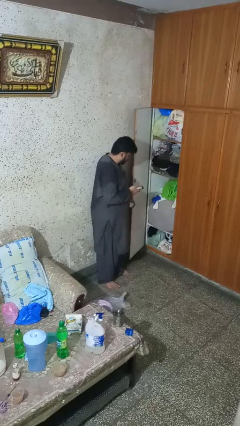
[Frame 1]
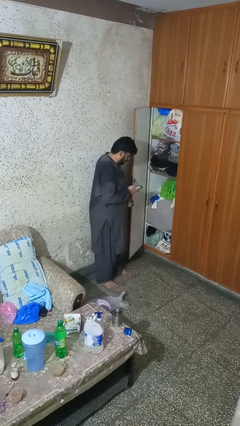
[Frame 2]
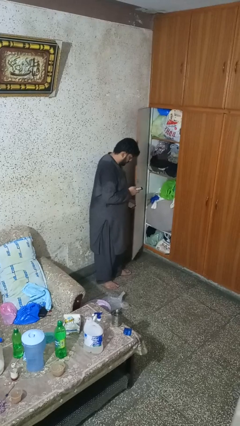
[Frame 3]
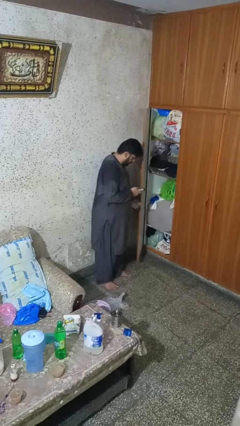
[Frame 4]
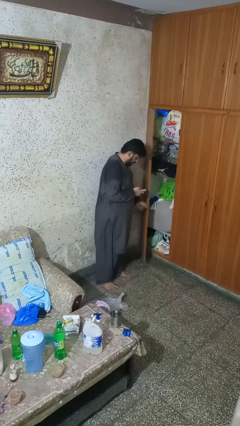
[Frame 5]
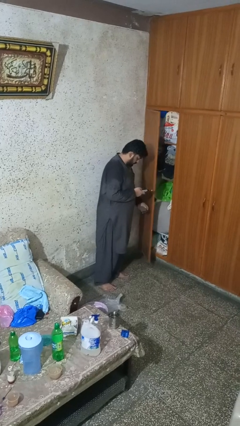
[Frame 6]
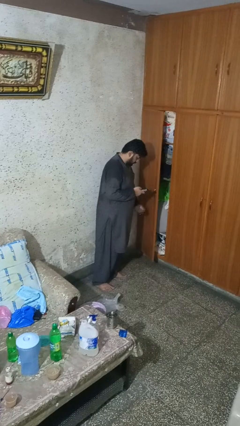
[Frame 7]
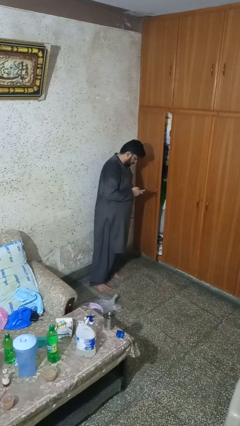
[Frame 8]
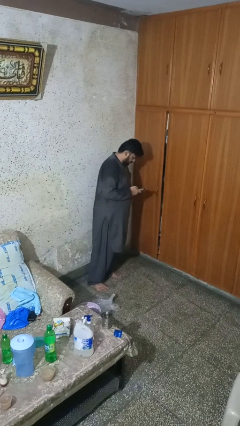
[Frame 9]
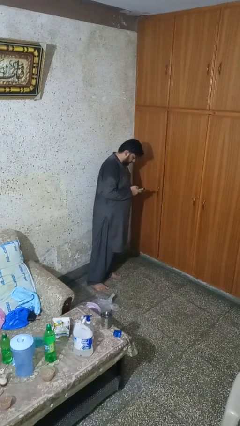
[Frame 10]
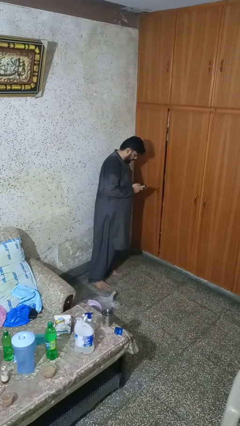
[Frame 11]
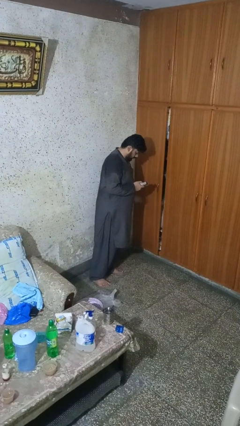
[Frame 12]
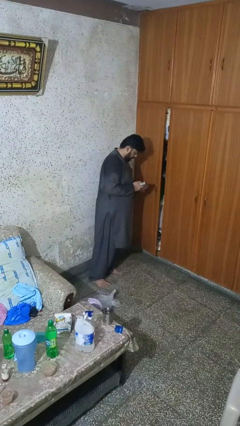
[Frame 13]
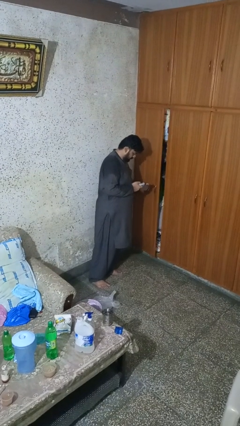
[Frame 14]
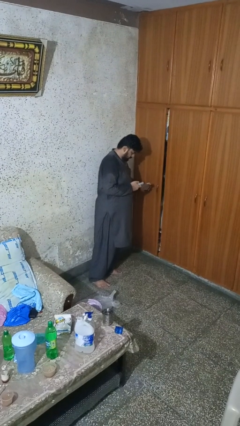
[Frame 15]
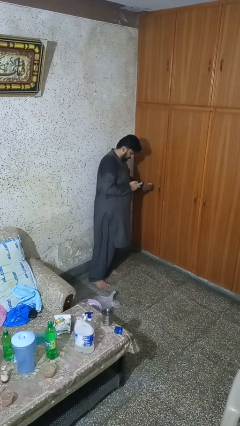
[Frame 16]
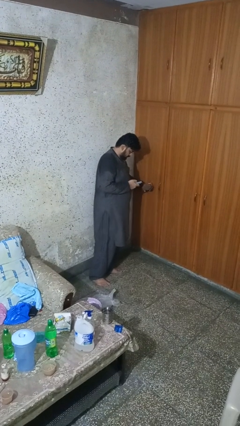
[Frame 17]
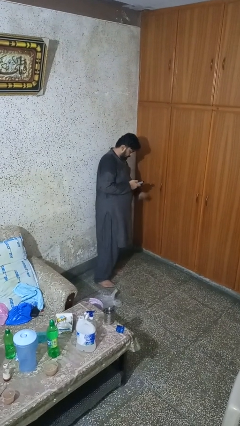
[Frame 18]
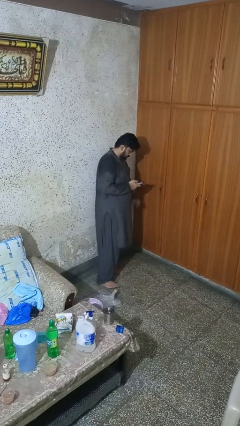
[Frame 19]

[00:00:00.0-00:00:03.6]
person closes closet door

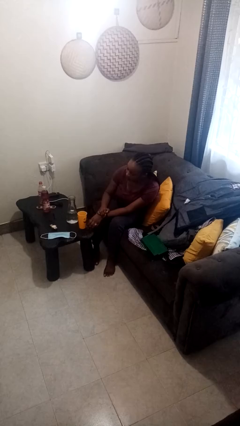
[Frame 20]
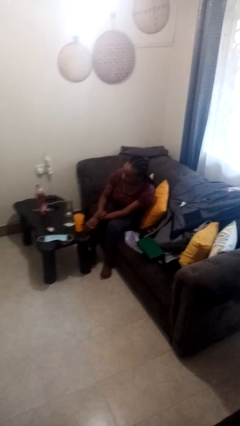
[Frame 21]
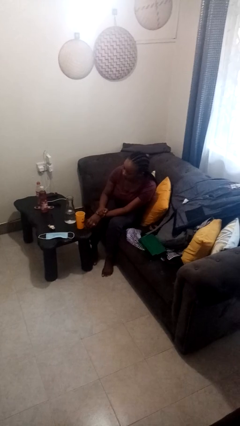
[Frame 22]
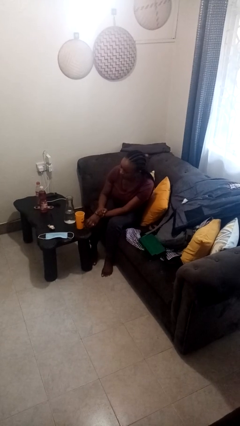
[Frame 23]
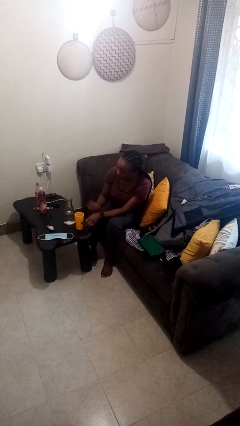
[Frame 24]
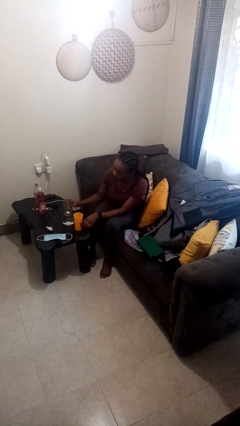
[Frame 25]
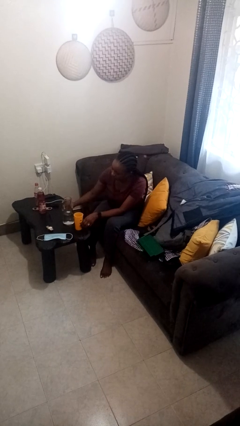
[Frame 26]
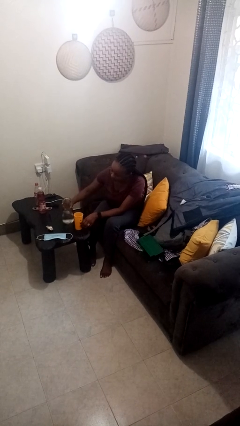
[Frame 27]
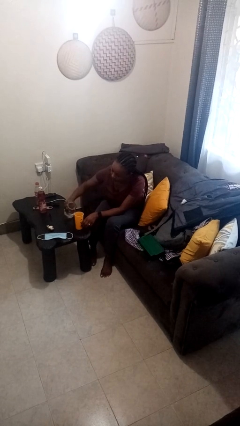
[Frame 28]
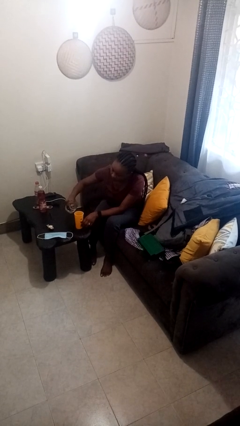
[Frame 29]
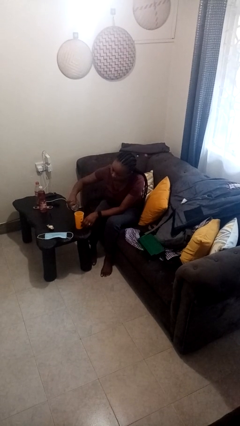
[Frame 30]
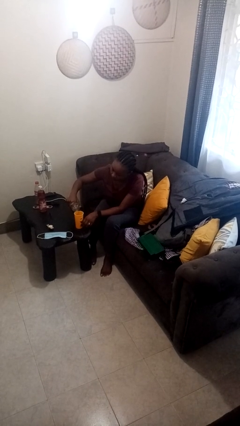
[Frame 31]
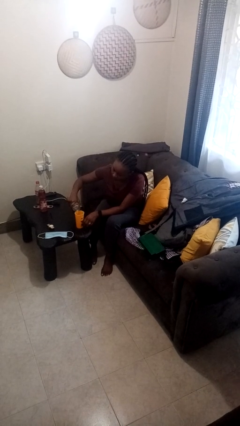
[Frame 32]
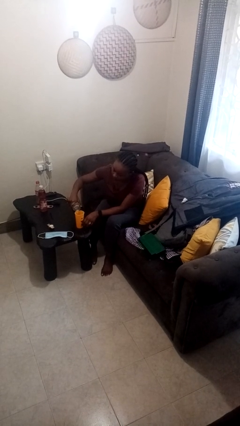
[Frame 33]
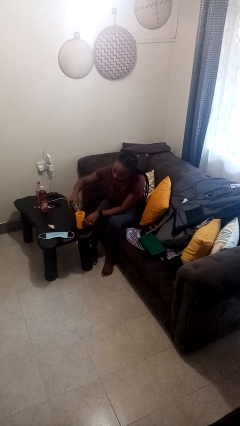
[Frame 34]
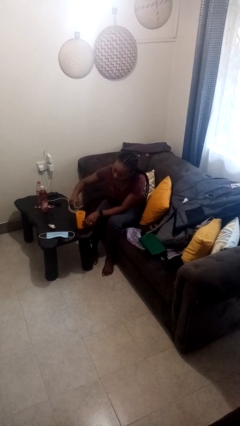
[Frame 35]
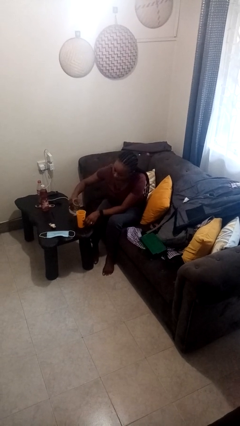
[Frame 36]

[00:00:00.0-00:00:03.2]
person pours liquid into cup

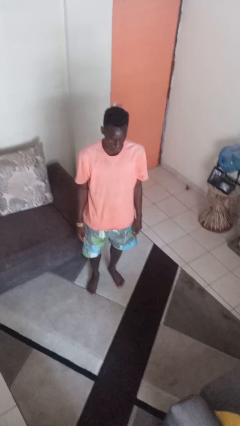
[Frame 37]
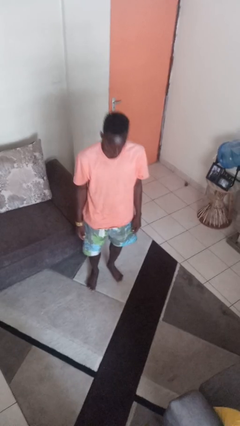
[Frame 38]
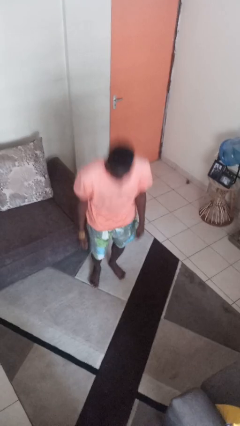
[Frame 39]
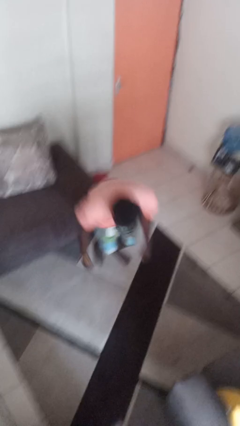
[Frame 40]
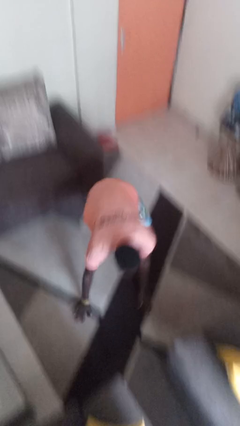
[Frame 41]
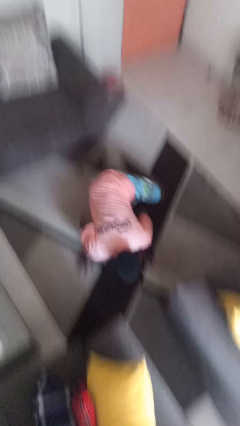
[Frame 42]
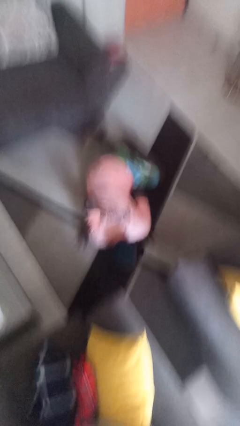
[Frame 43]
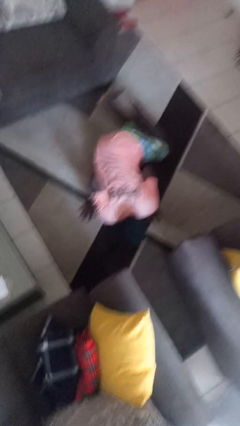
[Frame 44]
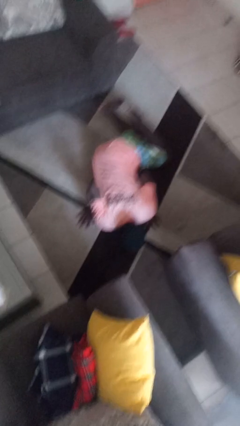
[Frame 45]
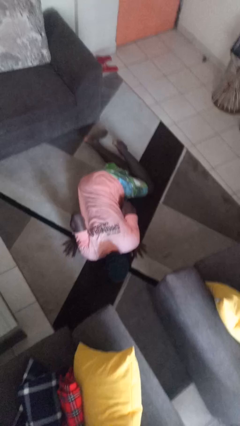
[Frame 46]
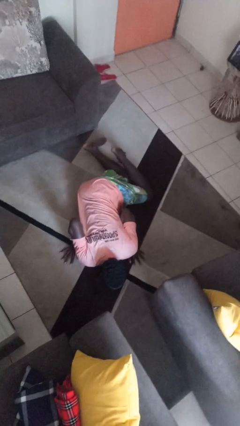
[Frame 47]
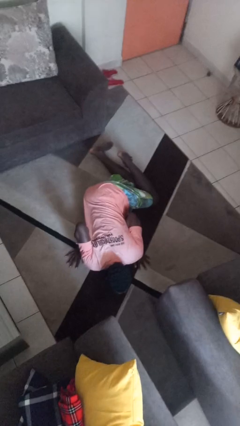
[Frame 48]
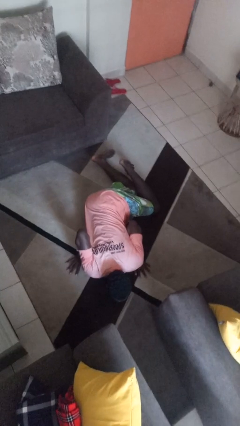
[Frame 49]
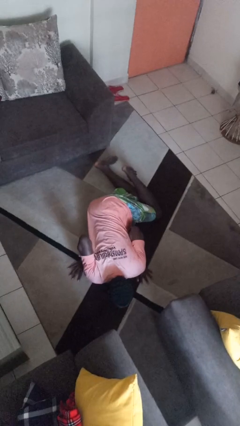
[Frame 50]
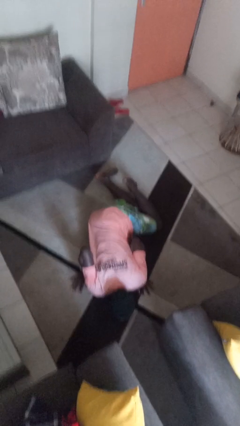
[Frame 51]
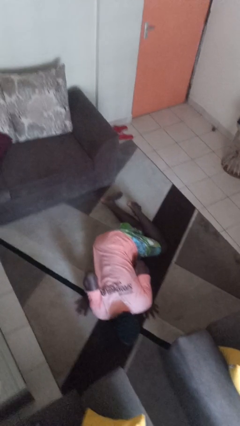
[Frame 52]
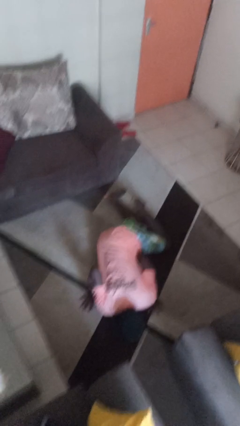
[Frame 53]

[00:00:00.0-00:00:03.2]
person falls while standing

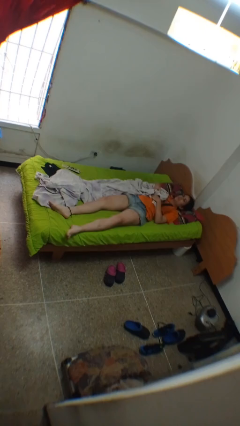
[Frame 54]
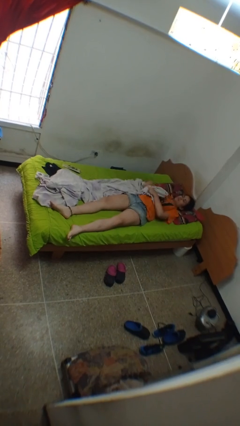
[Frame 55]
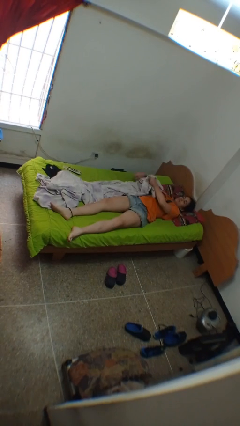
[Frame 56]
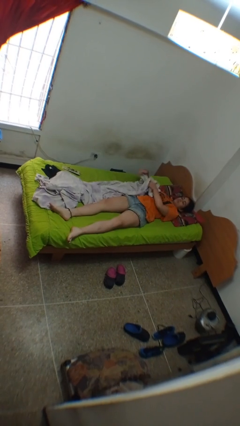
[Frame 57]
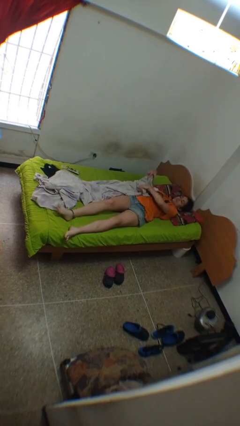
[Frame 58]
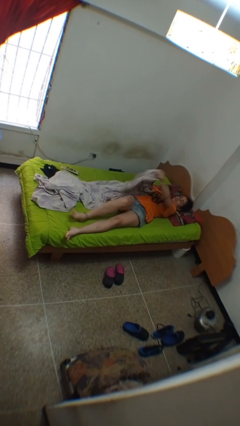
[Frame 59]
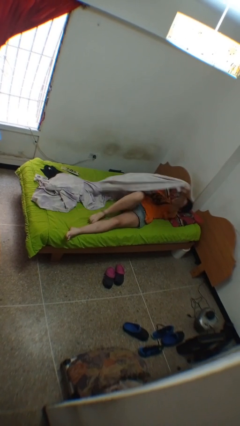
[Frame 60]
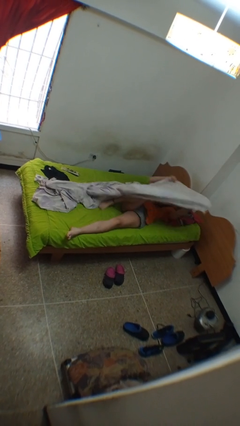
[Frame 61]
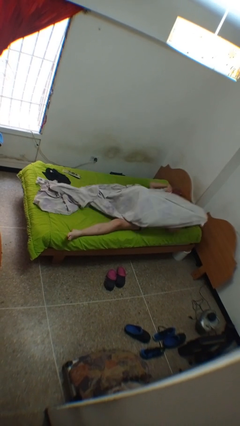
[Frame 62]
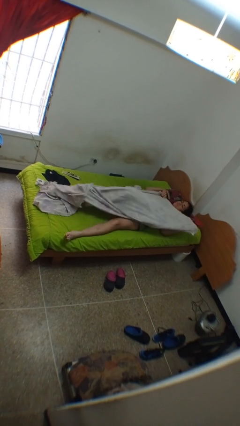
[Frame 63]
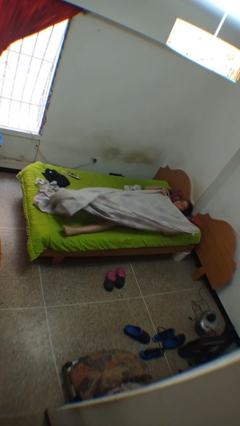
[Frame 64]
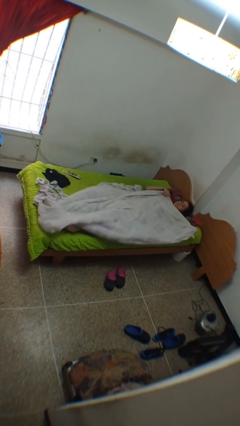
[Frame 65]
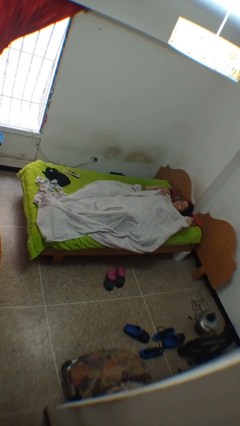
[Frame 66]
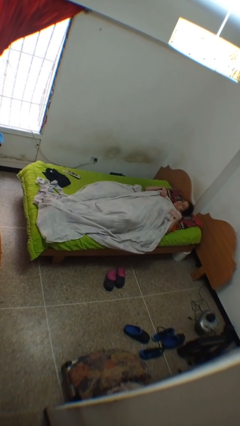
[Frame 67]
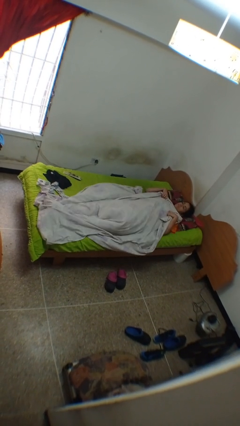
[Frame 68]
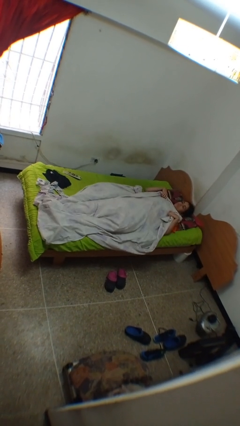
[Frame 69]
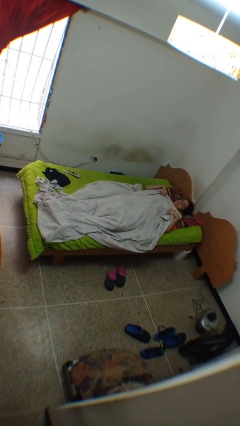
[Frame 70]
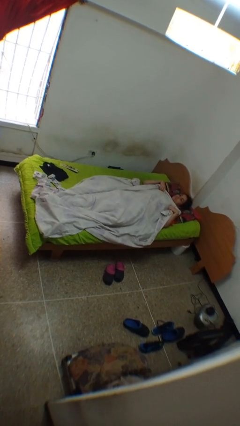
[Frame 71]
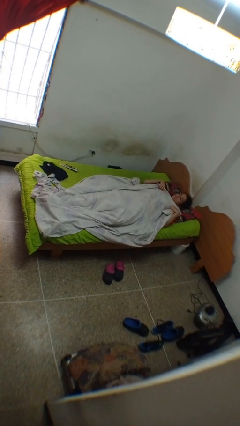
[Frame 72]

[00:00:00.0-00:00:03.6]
person covers with bedsheets

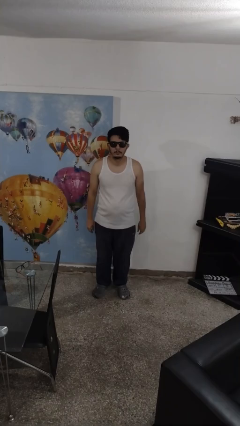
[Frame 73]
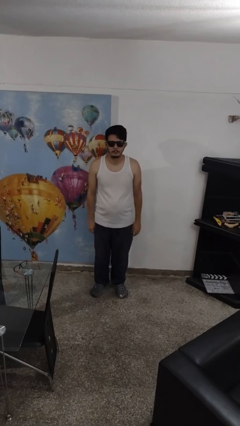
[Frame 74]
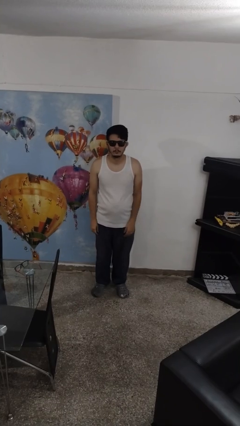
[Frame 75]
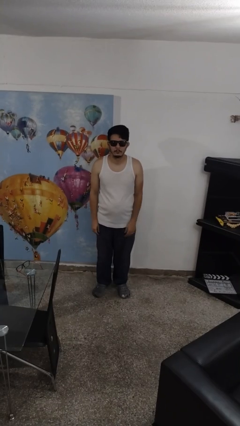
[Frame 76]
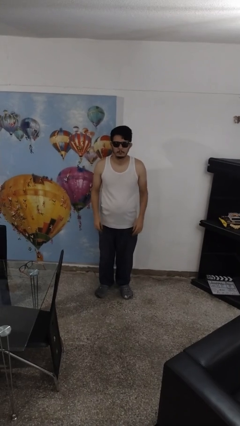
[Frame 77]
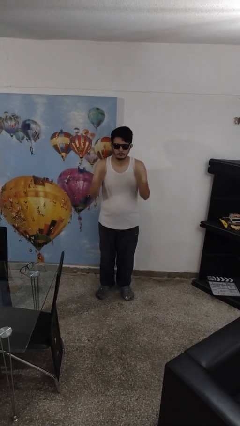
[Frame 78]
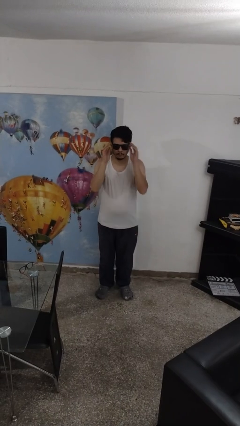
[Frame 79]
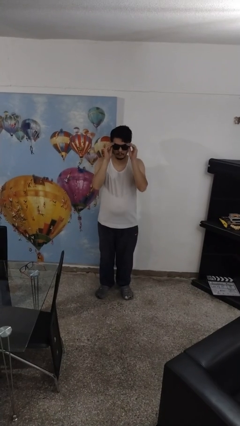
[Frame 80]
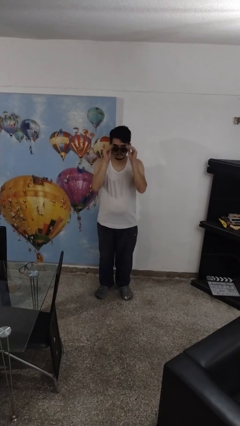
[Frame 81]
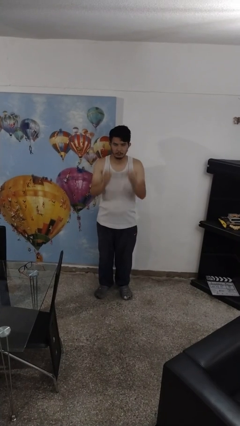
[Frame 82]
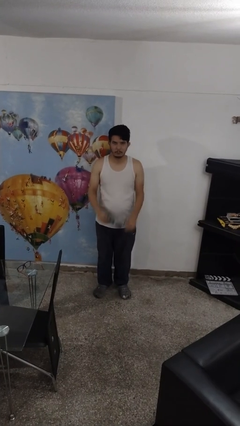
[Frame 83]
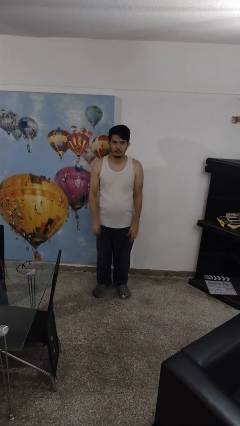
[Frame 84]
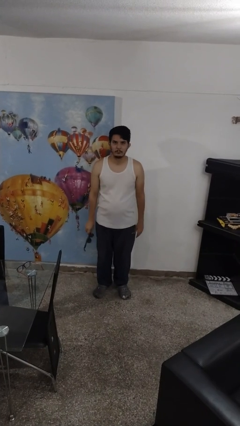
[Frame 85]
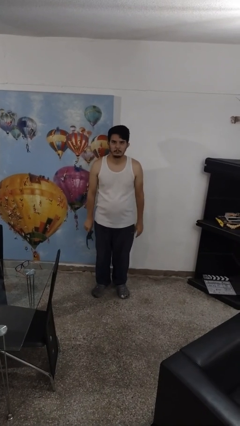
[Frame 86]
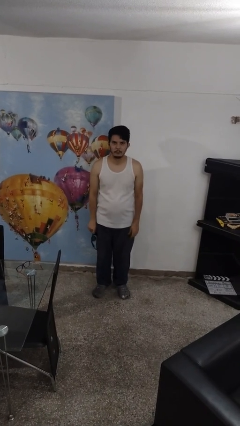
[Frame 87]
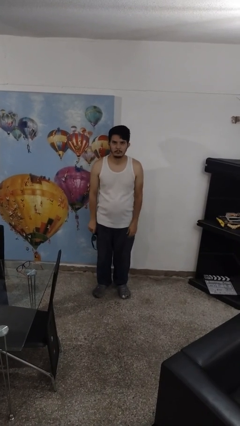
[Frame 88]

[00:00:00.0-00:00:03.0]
person takes off sunglasses

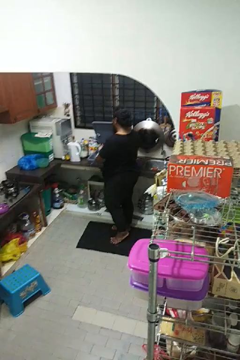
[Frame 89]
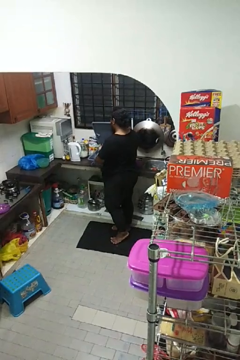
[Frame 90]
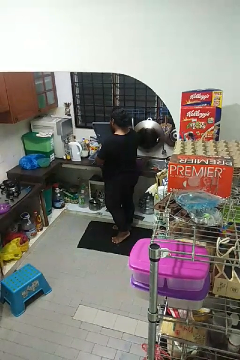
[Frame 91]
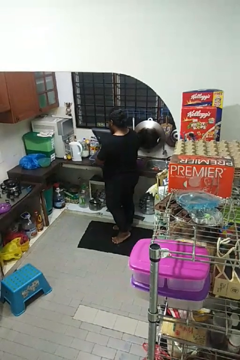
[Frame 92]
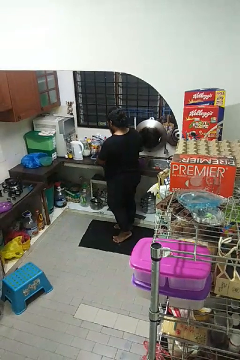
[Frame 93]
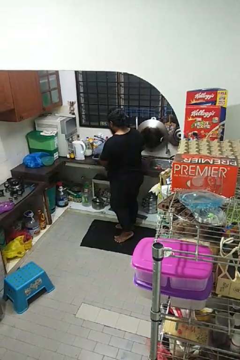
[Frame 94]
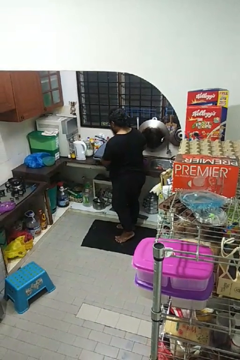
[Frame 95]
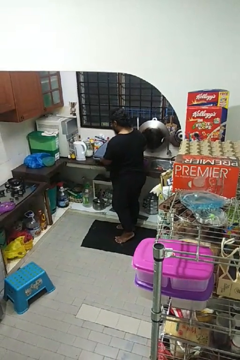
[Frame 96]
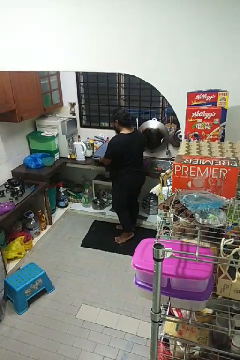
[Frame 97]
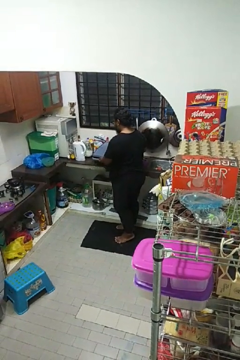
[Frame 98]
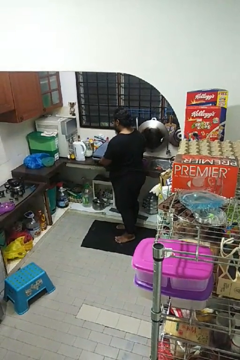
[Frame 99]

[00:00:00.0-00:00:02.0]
person closes dishwasher
